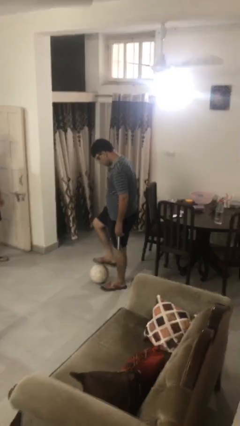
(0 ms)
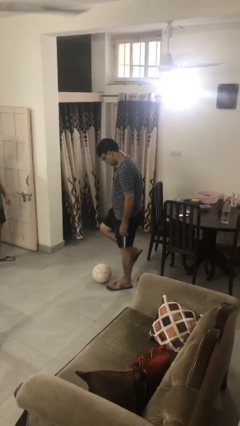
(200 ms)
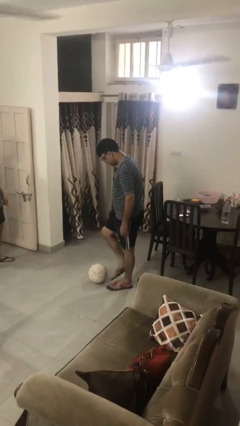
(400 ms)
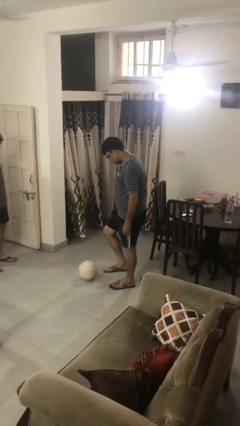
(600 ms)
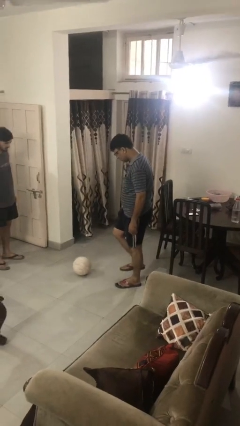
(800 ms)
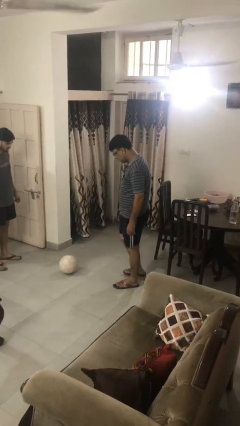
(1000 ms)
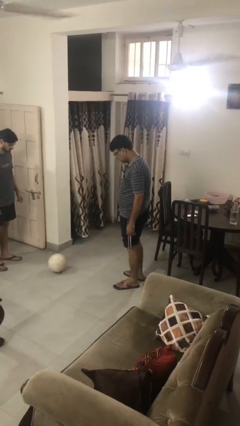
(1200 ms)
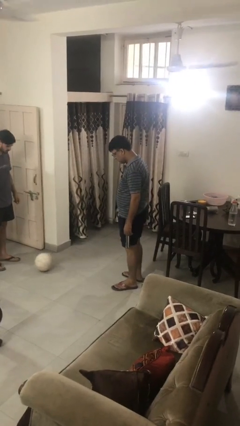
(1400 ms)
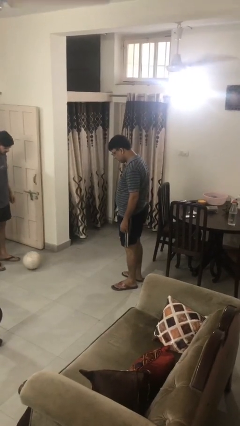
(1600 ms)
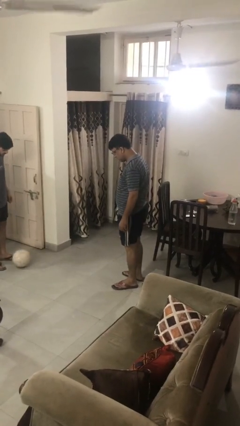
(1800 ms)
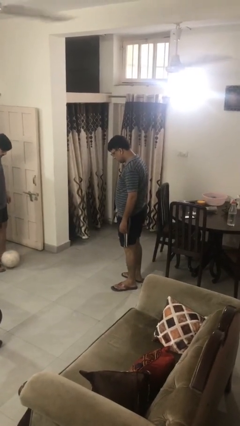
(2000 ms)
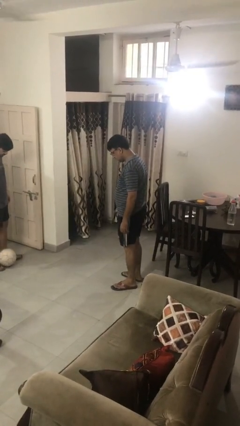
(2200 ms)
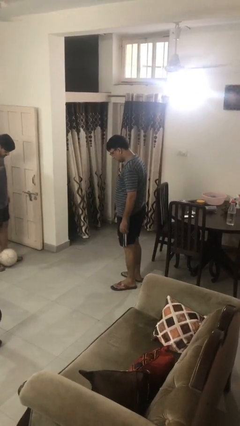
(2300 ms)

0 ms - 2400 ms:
person kicks object to person

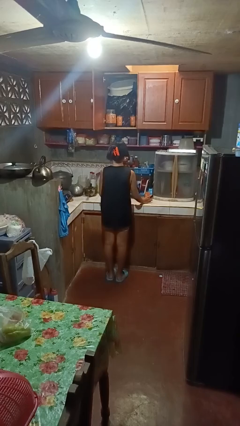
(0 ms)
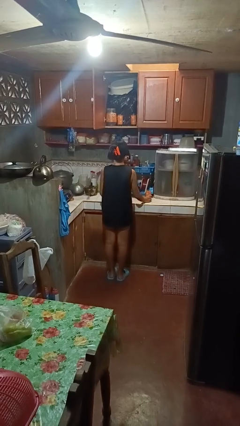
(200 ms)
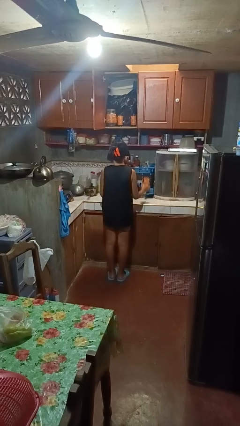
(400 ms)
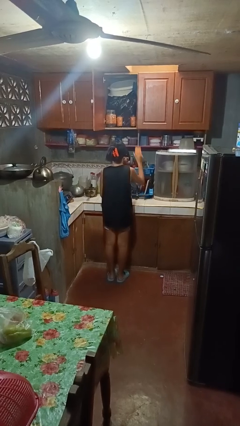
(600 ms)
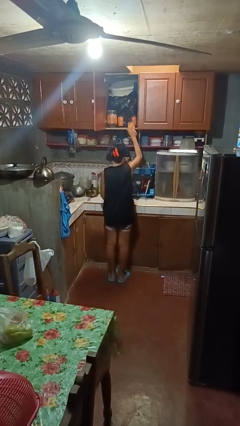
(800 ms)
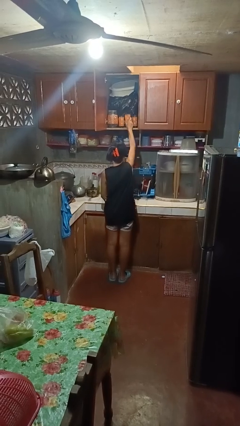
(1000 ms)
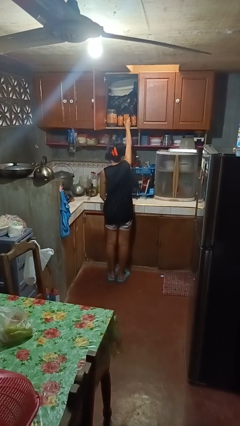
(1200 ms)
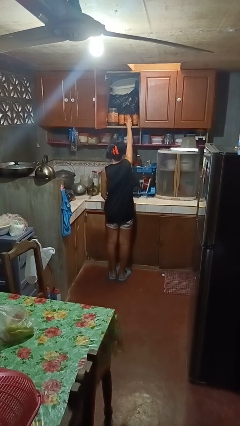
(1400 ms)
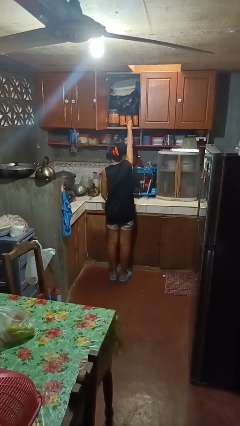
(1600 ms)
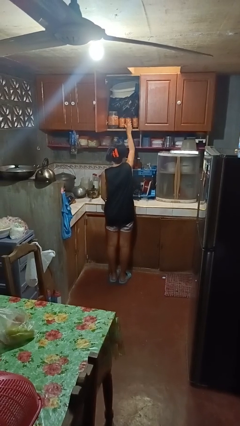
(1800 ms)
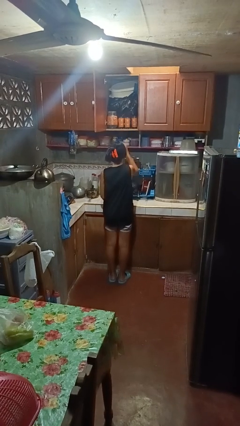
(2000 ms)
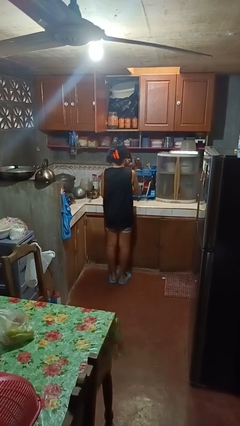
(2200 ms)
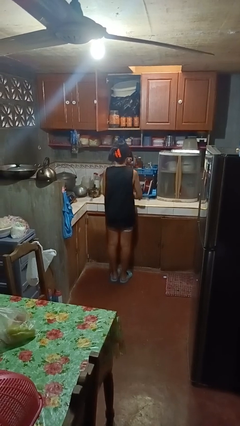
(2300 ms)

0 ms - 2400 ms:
person puts object in cabinet

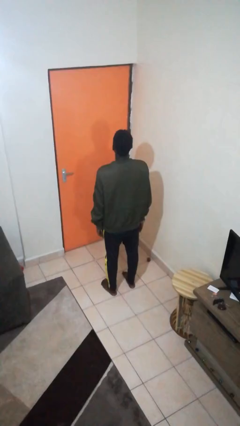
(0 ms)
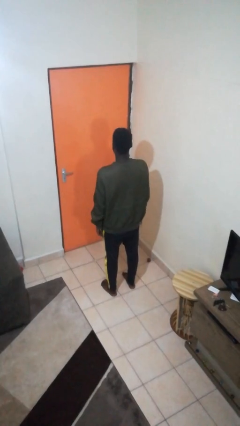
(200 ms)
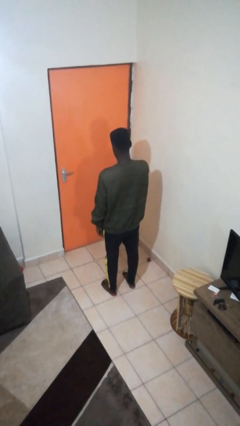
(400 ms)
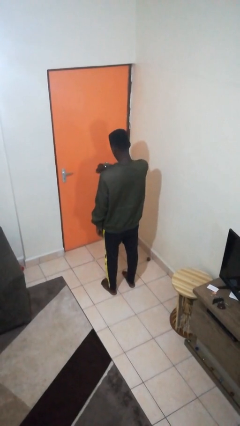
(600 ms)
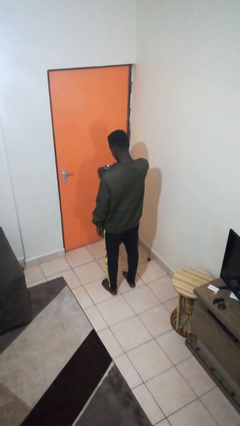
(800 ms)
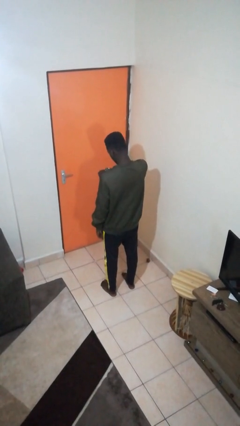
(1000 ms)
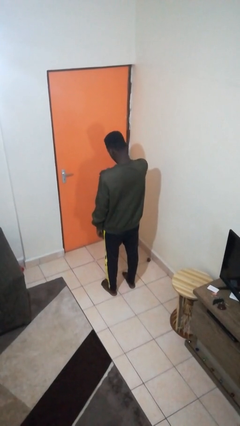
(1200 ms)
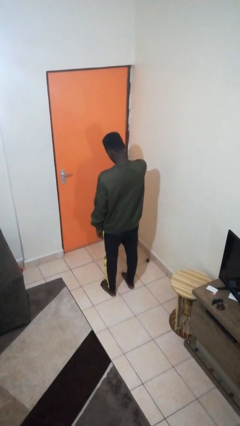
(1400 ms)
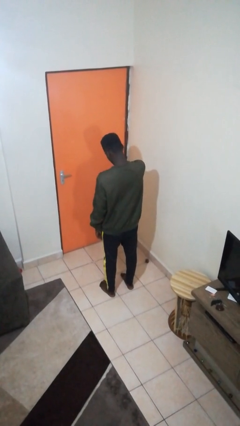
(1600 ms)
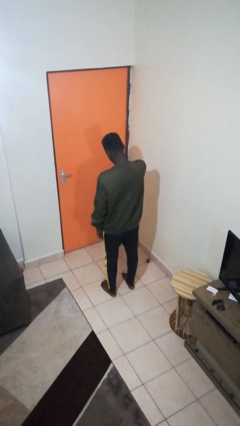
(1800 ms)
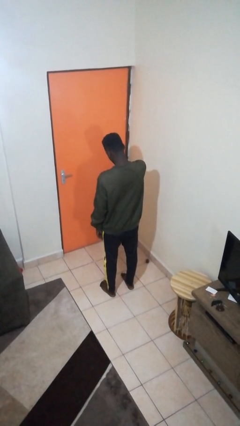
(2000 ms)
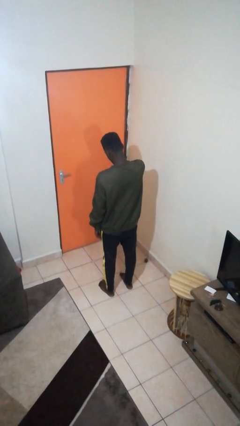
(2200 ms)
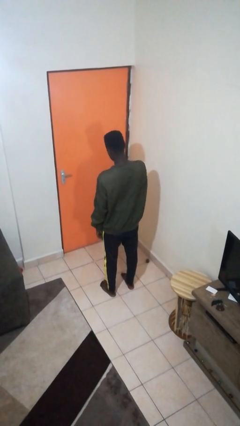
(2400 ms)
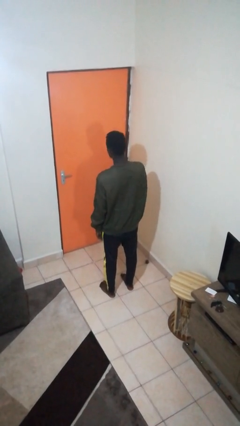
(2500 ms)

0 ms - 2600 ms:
person looks at wristwatch

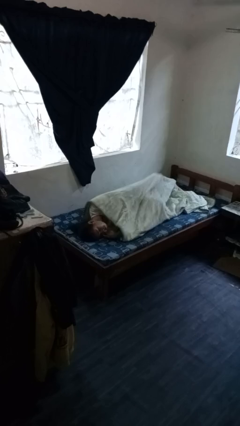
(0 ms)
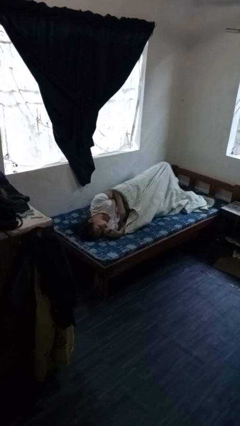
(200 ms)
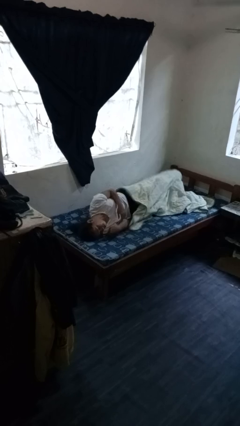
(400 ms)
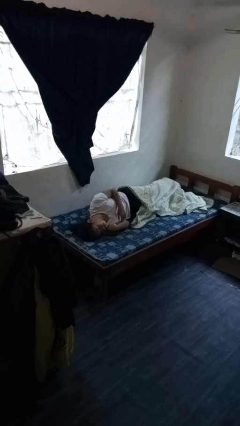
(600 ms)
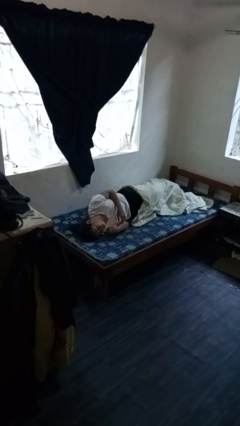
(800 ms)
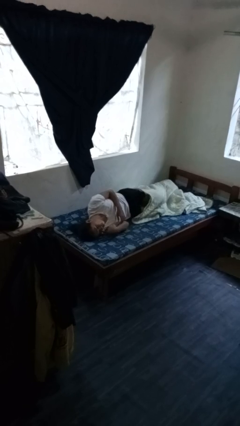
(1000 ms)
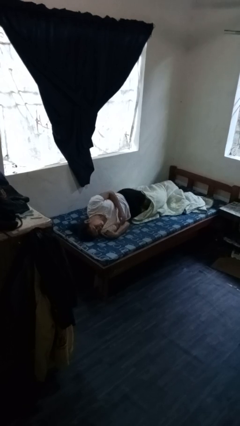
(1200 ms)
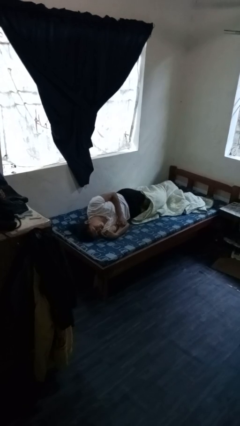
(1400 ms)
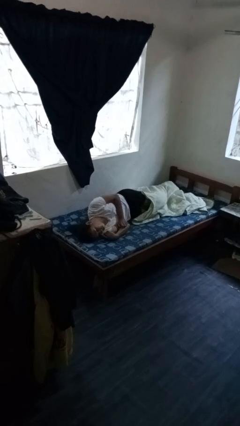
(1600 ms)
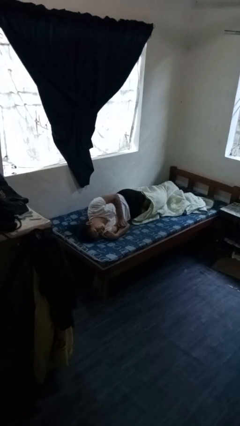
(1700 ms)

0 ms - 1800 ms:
person uncovers with bedsheets

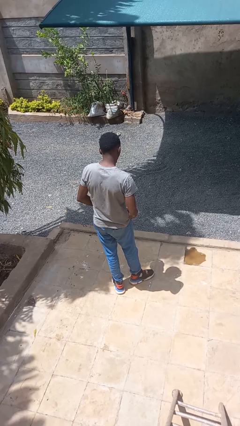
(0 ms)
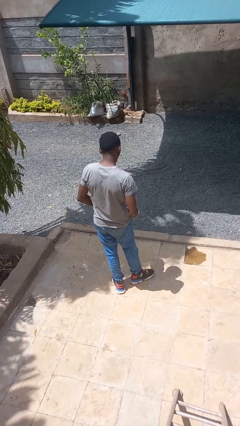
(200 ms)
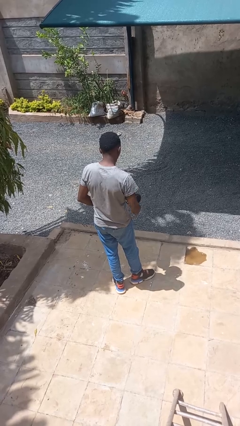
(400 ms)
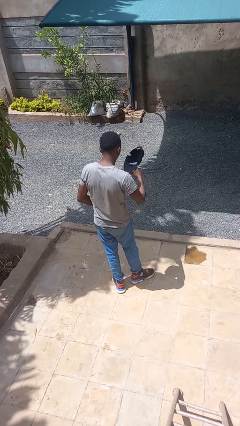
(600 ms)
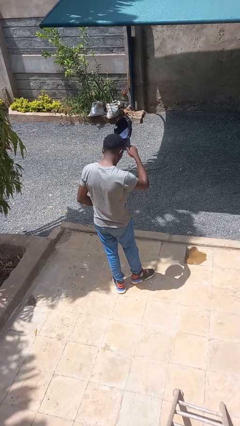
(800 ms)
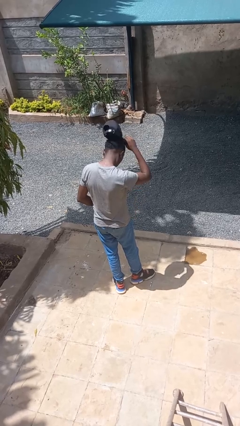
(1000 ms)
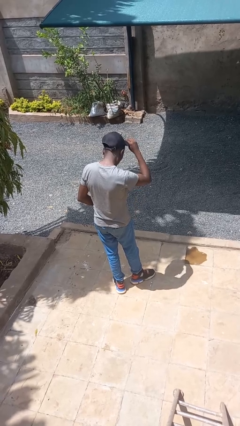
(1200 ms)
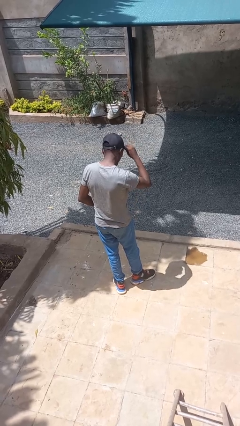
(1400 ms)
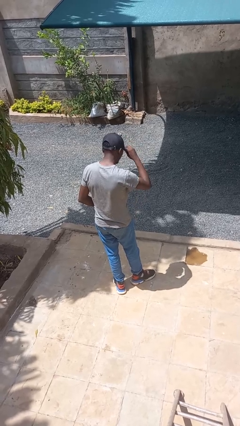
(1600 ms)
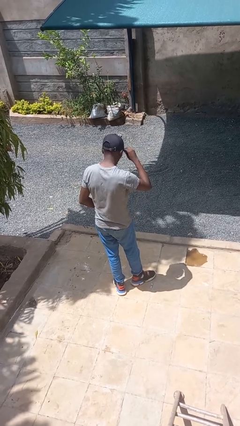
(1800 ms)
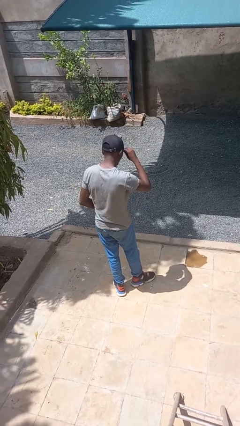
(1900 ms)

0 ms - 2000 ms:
person puts on hat

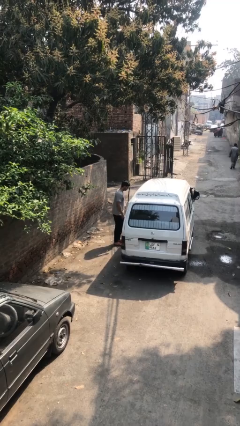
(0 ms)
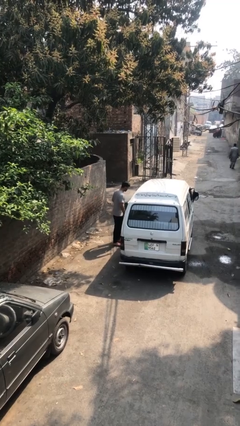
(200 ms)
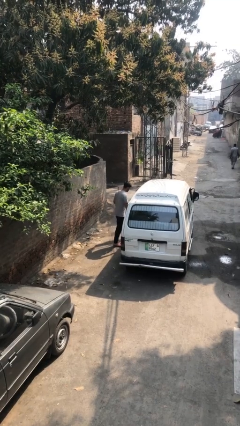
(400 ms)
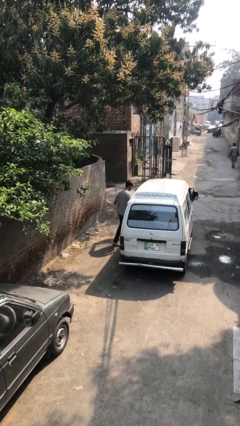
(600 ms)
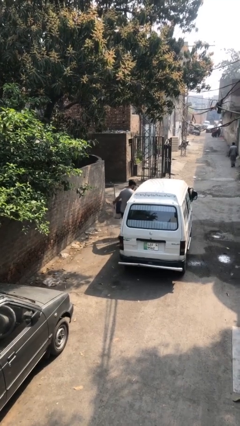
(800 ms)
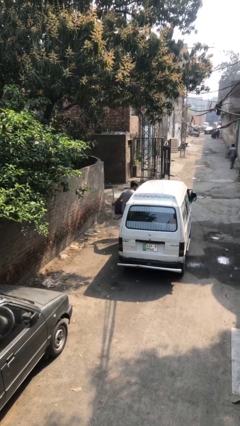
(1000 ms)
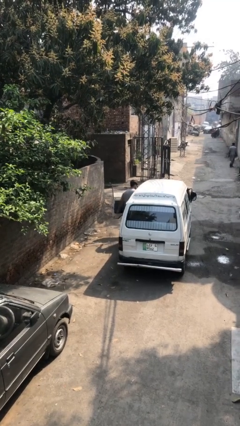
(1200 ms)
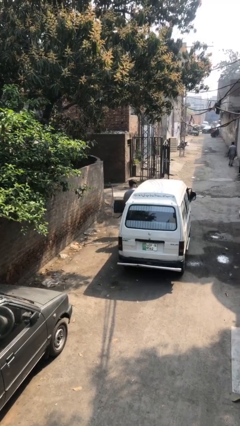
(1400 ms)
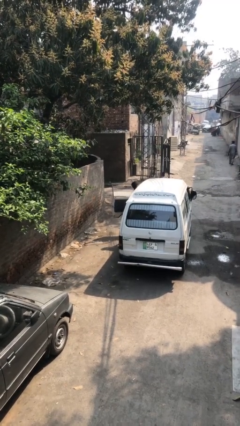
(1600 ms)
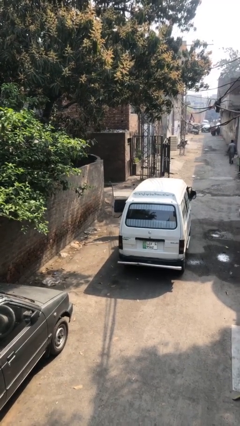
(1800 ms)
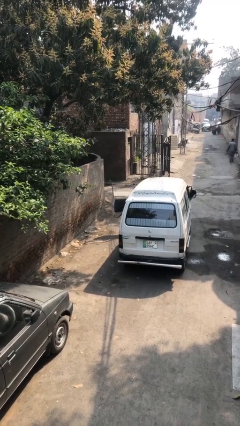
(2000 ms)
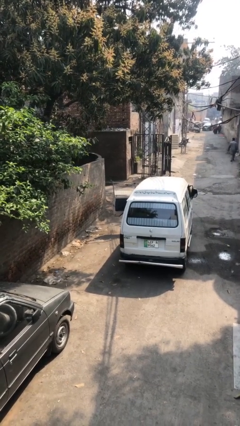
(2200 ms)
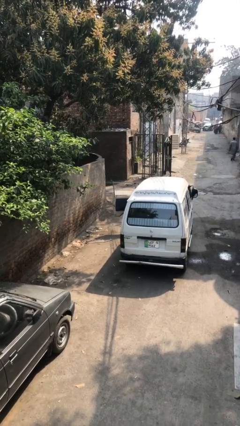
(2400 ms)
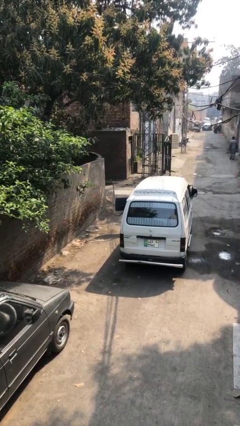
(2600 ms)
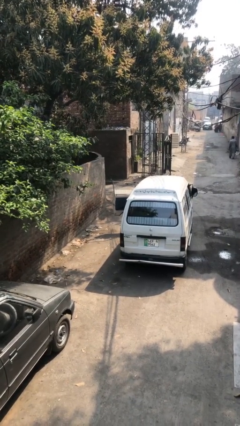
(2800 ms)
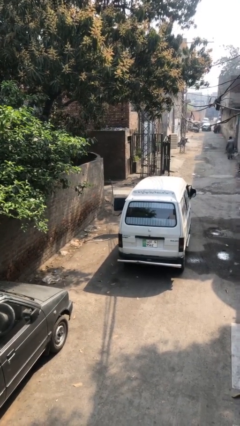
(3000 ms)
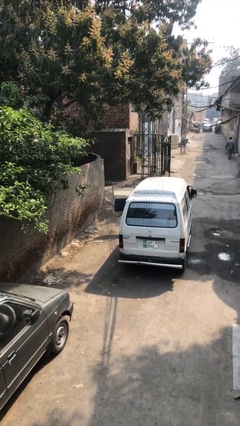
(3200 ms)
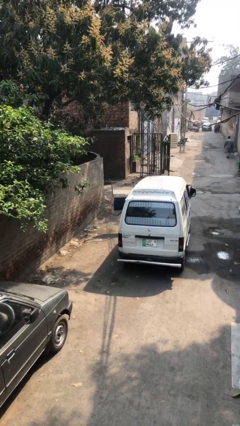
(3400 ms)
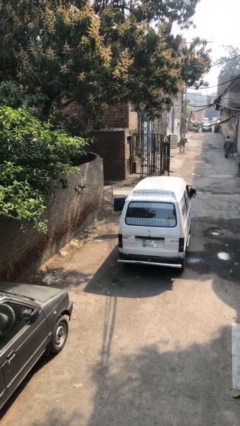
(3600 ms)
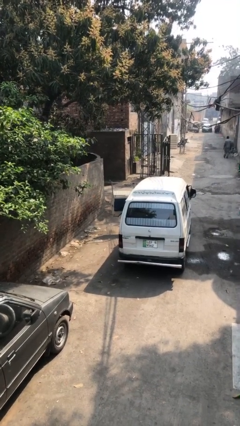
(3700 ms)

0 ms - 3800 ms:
person enters car

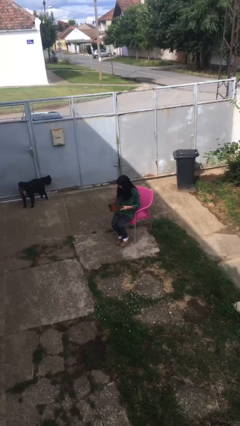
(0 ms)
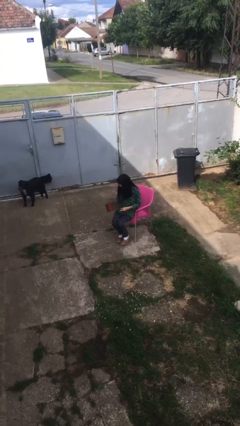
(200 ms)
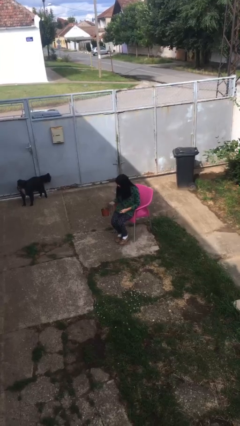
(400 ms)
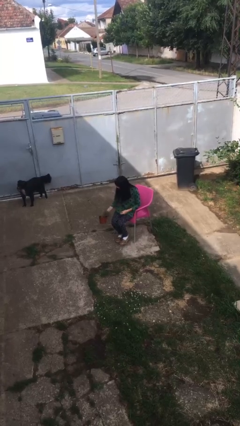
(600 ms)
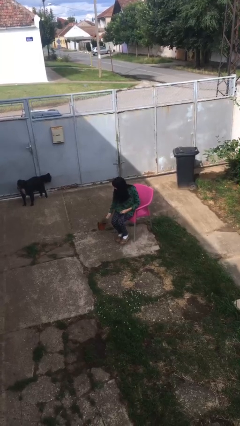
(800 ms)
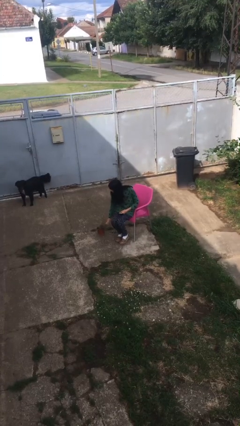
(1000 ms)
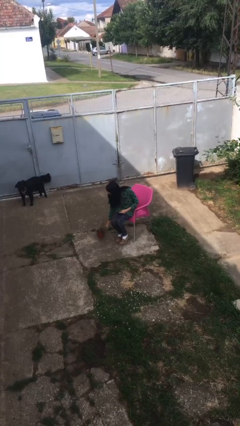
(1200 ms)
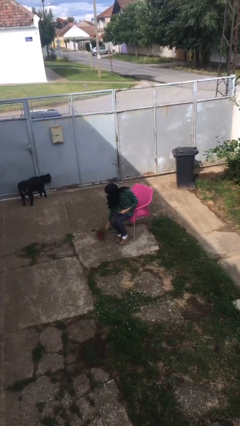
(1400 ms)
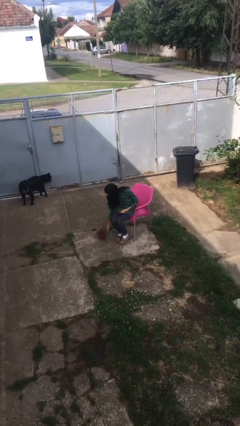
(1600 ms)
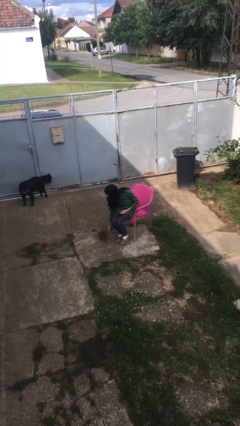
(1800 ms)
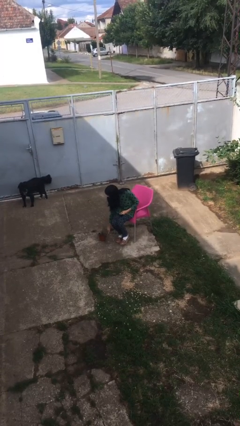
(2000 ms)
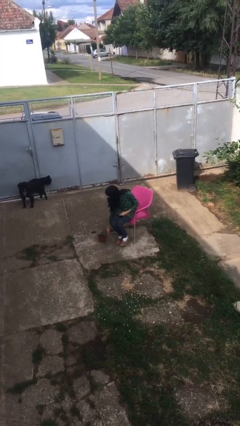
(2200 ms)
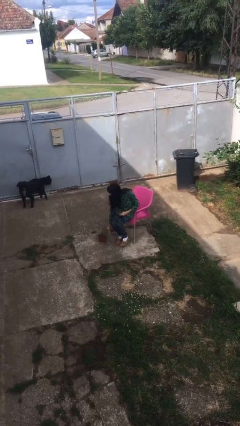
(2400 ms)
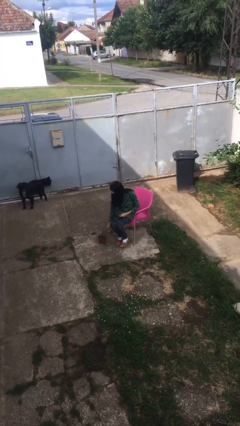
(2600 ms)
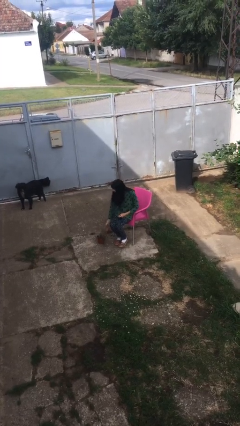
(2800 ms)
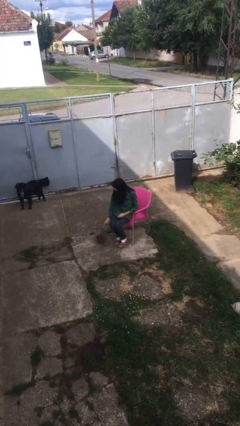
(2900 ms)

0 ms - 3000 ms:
person puts down object on floor
